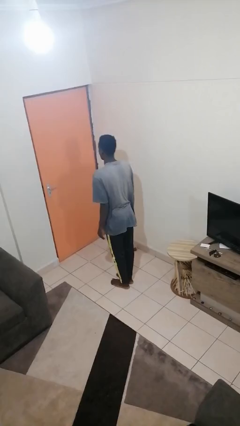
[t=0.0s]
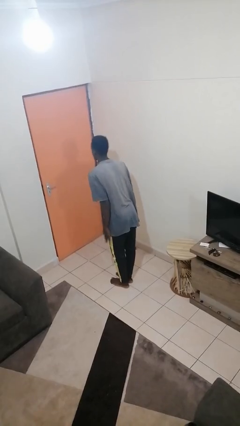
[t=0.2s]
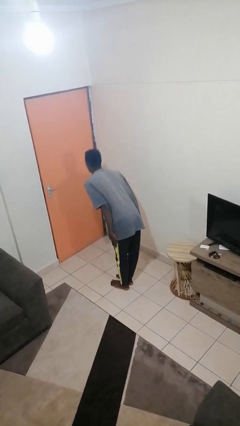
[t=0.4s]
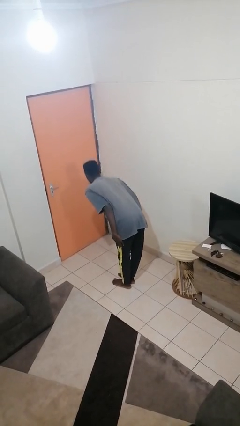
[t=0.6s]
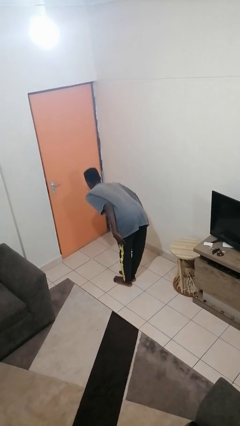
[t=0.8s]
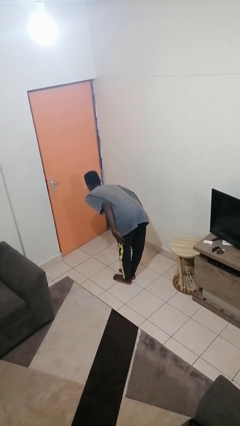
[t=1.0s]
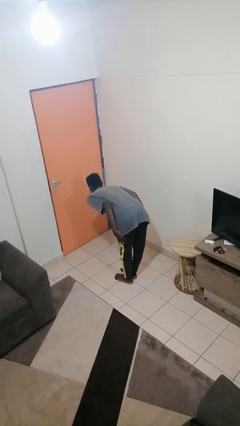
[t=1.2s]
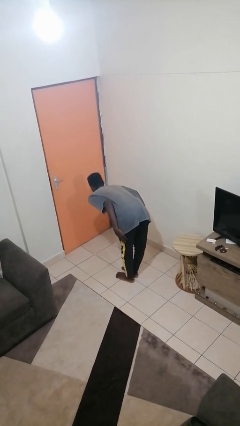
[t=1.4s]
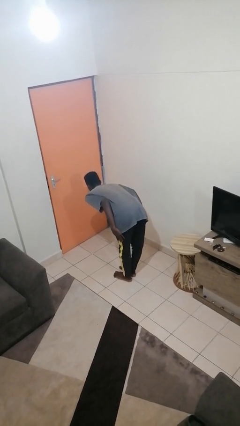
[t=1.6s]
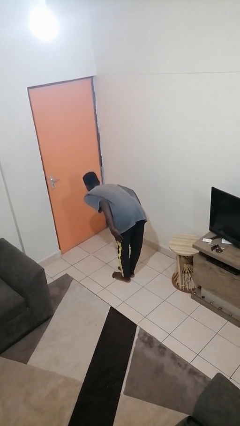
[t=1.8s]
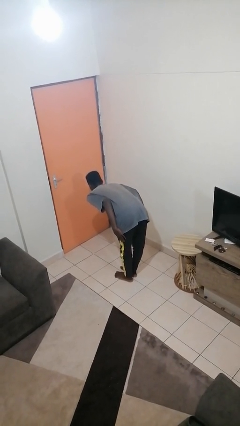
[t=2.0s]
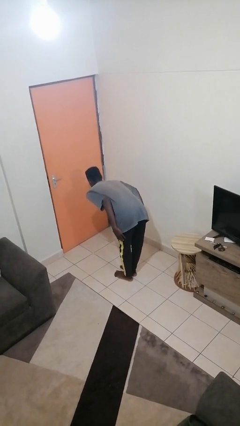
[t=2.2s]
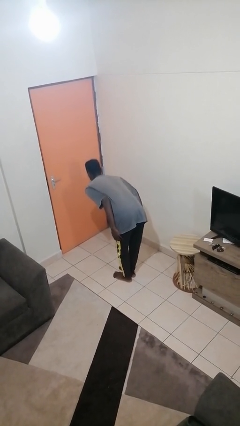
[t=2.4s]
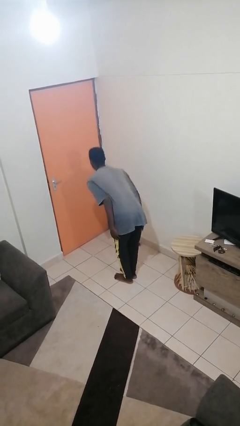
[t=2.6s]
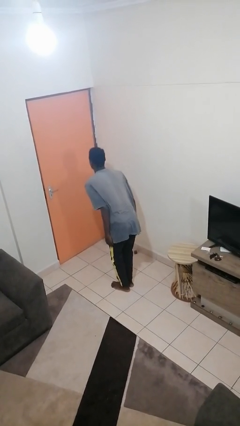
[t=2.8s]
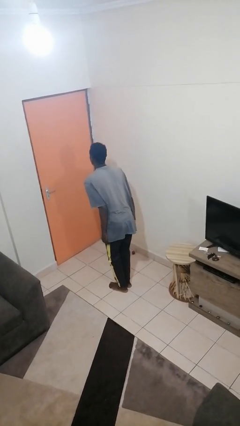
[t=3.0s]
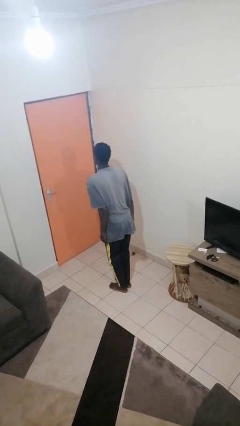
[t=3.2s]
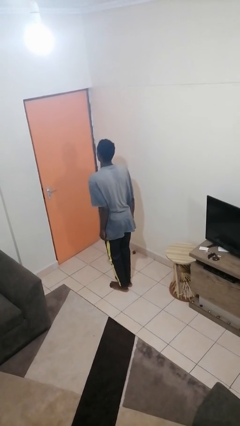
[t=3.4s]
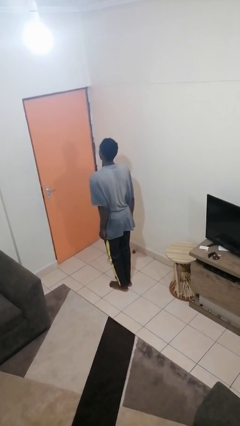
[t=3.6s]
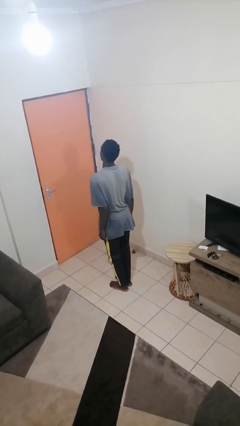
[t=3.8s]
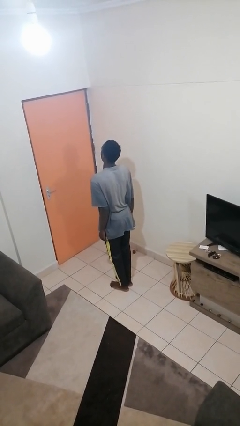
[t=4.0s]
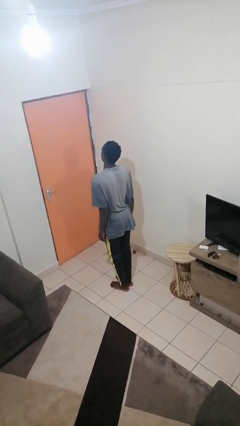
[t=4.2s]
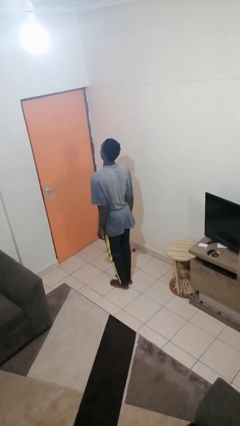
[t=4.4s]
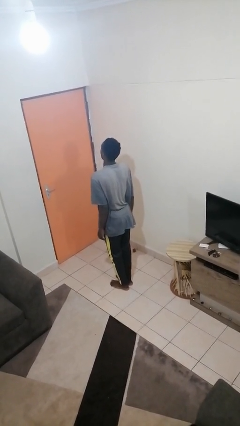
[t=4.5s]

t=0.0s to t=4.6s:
person bows

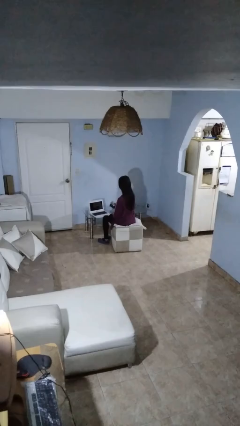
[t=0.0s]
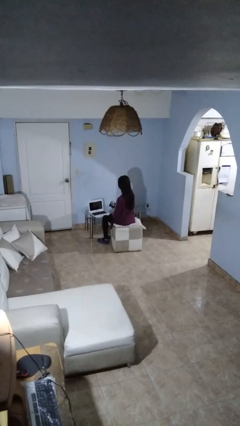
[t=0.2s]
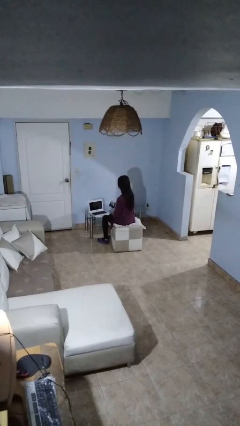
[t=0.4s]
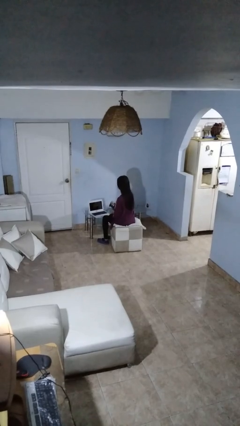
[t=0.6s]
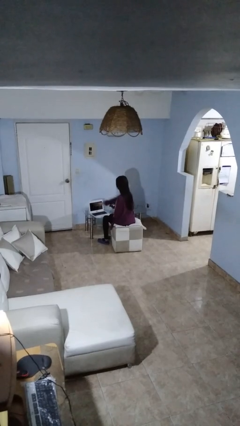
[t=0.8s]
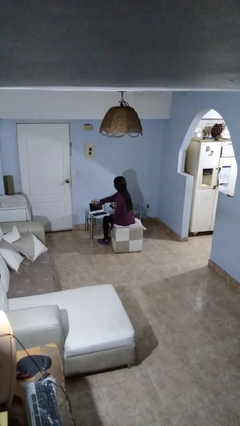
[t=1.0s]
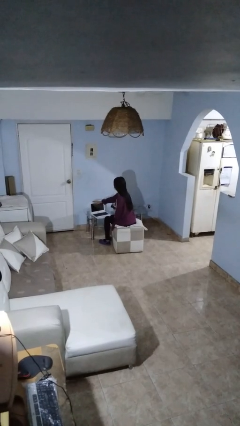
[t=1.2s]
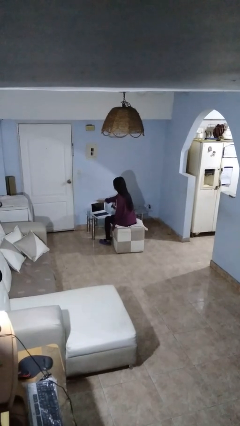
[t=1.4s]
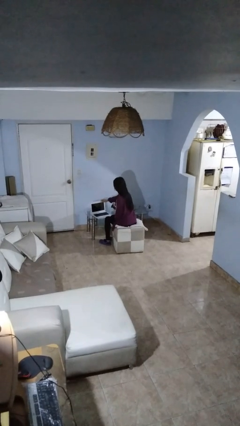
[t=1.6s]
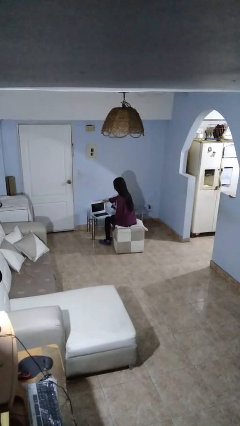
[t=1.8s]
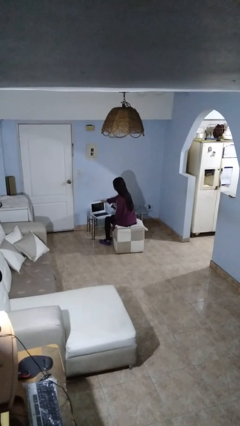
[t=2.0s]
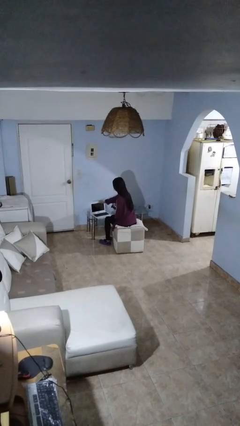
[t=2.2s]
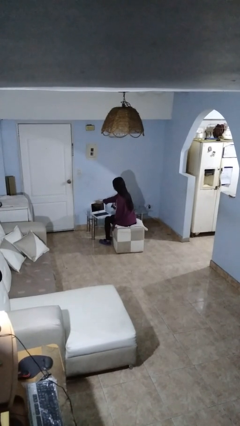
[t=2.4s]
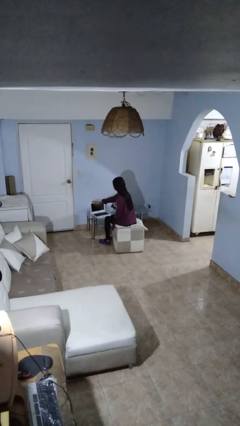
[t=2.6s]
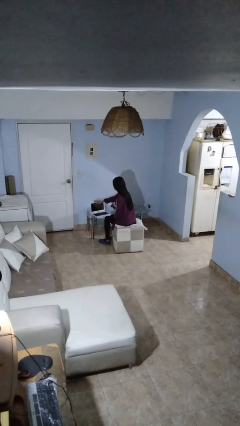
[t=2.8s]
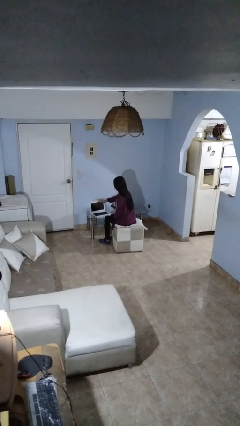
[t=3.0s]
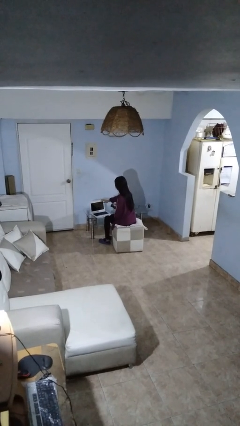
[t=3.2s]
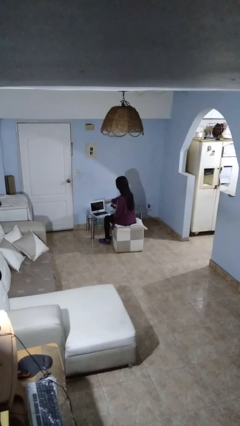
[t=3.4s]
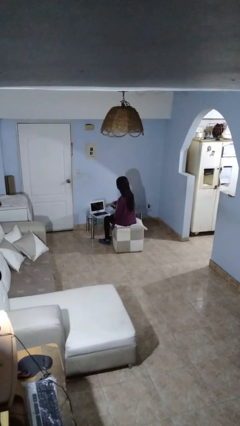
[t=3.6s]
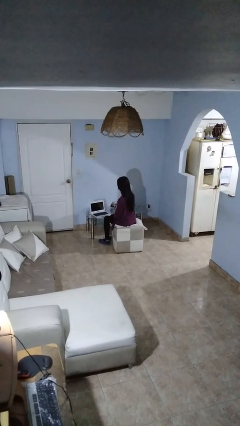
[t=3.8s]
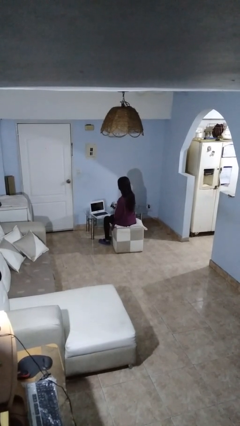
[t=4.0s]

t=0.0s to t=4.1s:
person waves hand over object

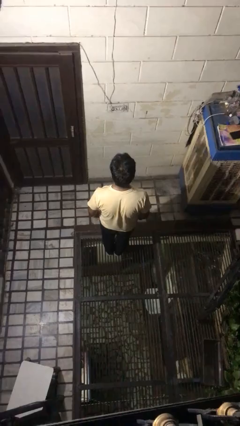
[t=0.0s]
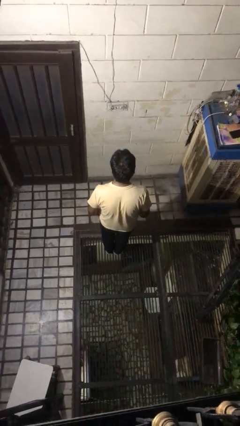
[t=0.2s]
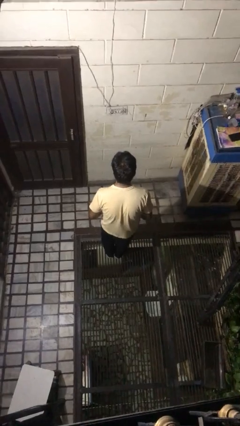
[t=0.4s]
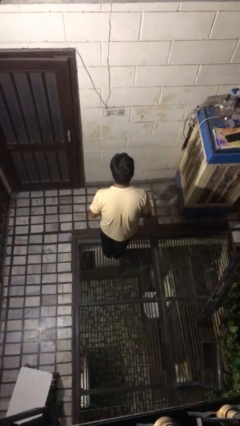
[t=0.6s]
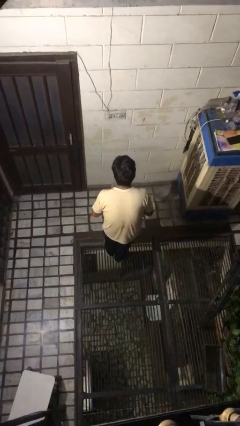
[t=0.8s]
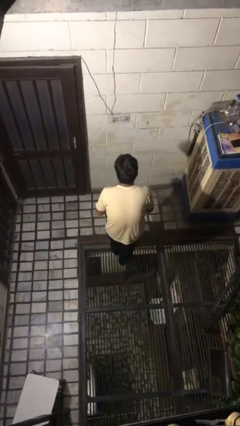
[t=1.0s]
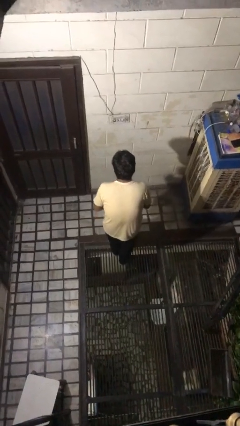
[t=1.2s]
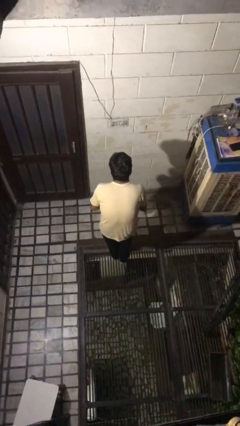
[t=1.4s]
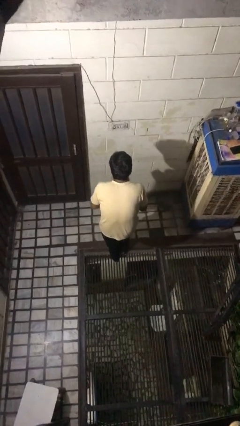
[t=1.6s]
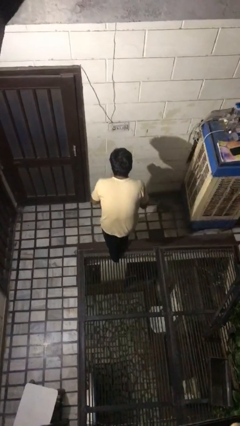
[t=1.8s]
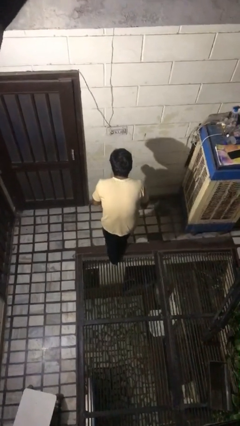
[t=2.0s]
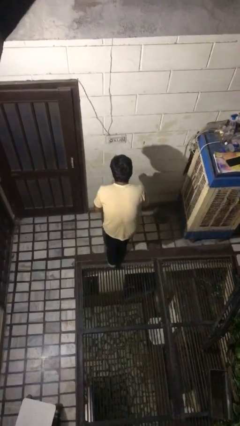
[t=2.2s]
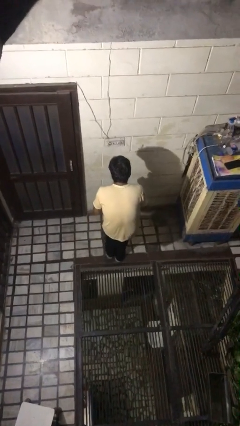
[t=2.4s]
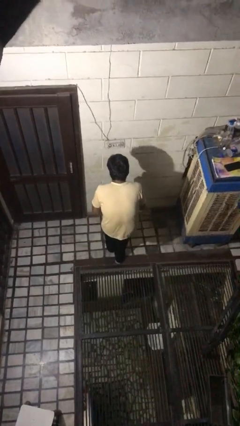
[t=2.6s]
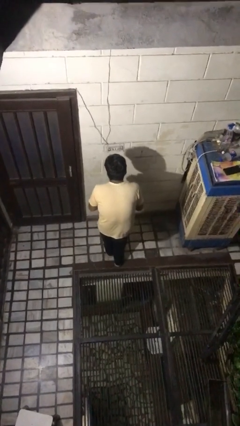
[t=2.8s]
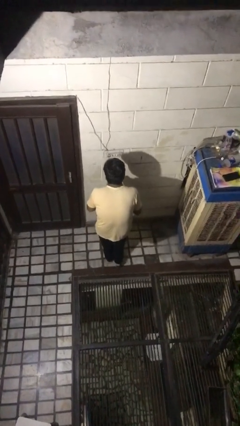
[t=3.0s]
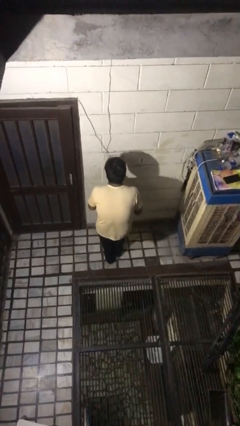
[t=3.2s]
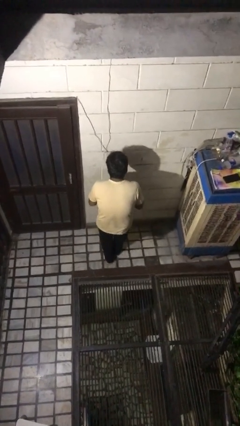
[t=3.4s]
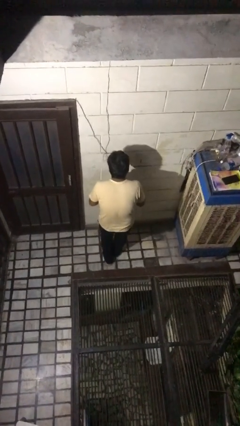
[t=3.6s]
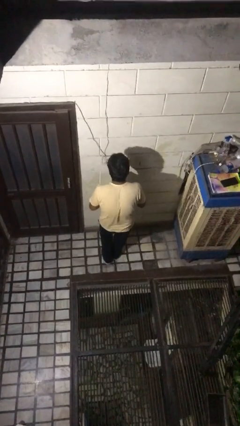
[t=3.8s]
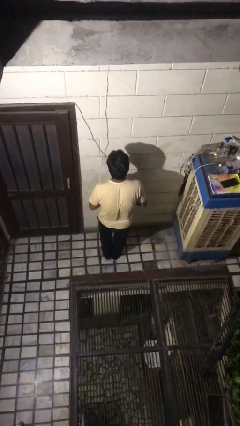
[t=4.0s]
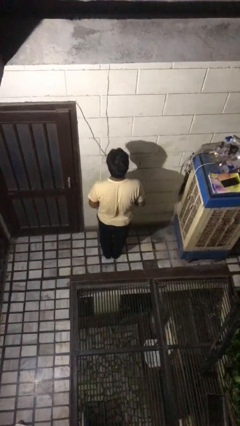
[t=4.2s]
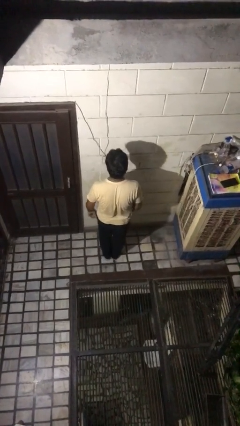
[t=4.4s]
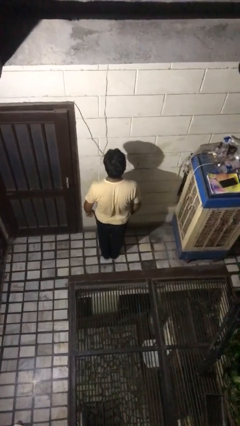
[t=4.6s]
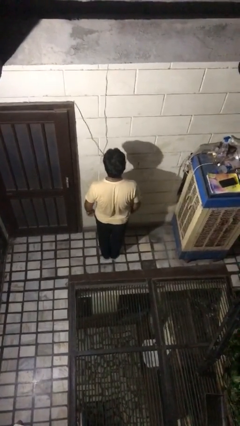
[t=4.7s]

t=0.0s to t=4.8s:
person walks tiptoe

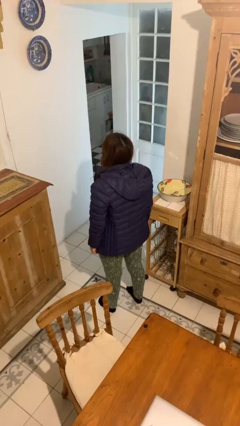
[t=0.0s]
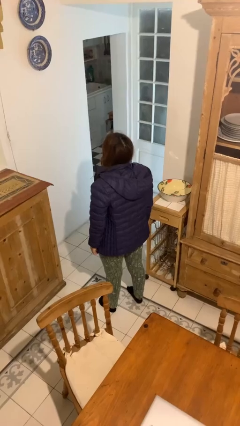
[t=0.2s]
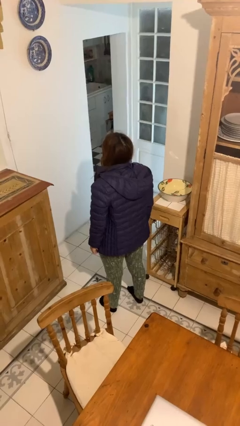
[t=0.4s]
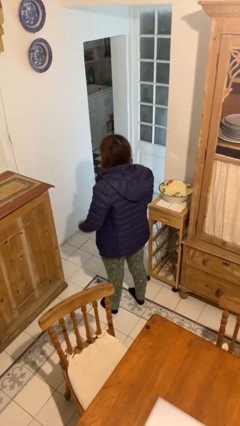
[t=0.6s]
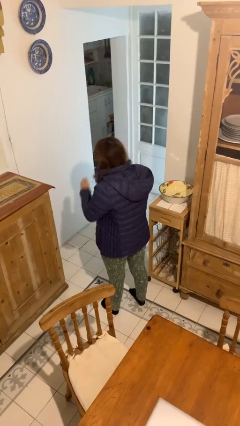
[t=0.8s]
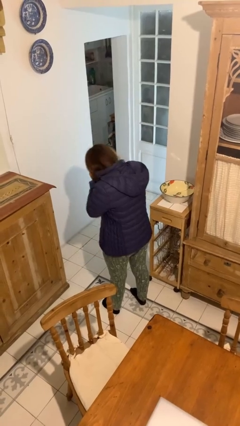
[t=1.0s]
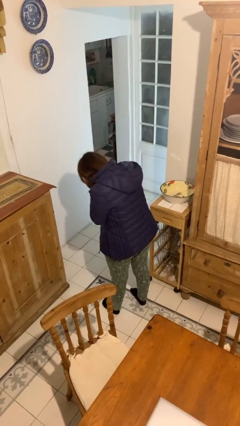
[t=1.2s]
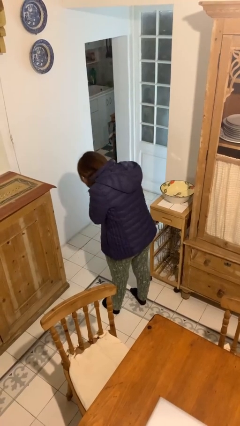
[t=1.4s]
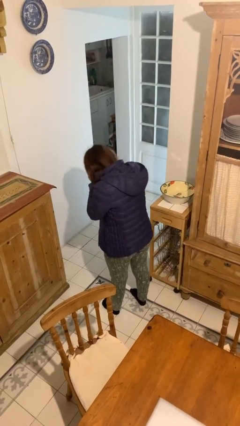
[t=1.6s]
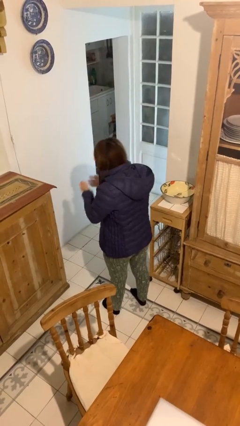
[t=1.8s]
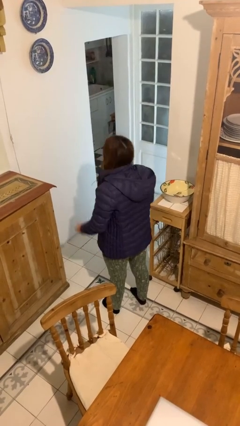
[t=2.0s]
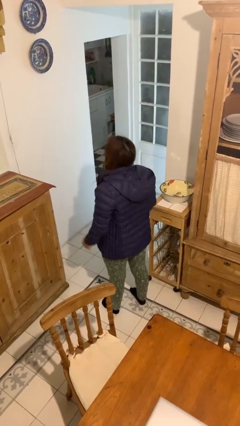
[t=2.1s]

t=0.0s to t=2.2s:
person sneezes into hand

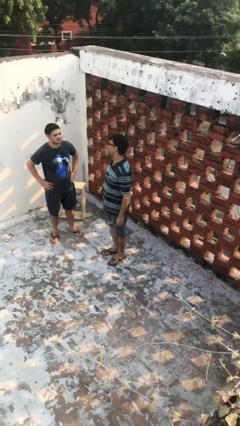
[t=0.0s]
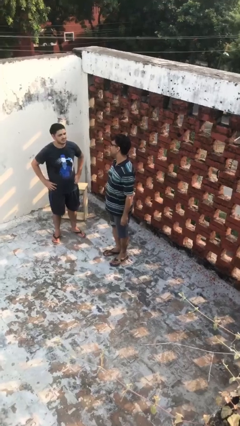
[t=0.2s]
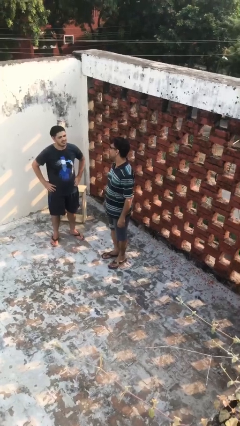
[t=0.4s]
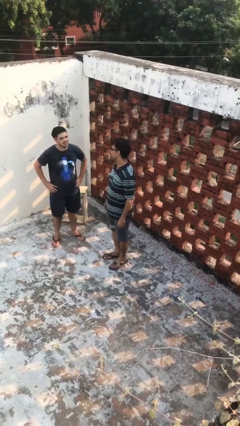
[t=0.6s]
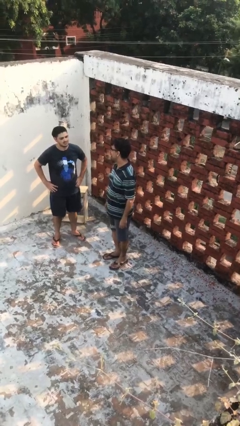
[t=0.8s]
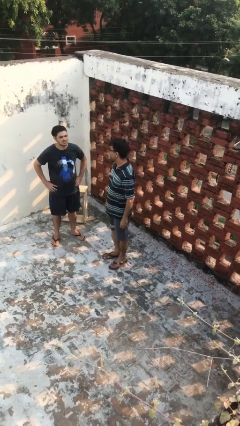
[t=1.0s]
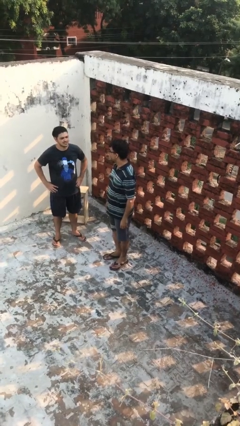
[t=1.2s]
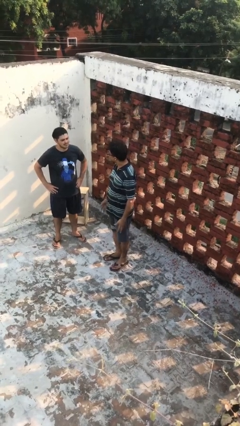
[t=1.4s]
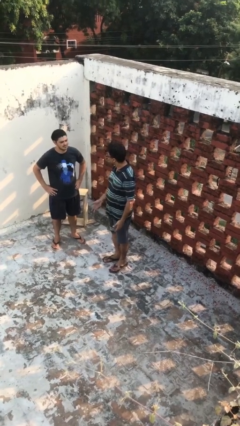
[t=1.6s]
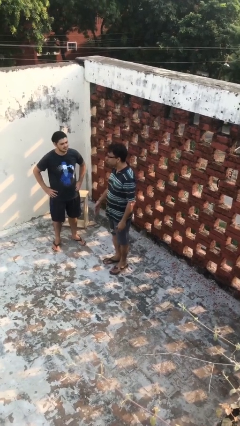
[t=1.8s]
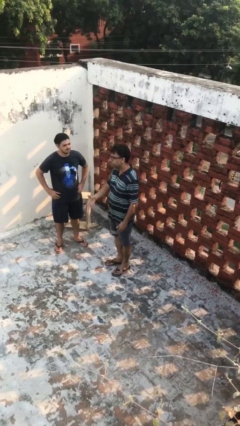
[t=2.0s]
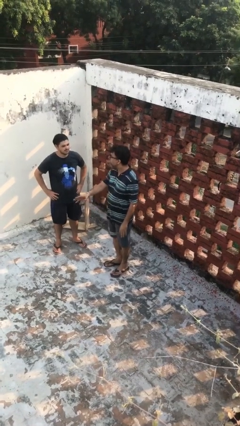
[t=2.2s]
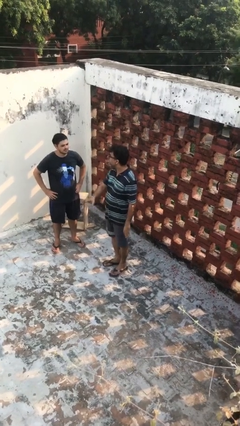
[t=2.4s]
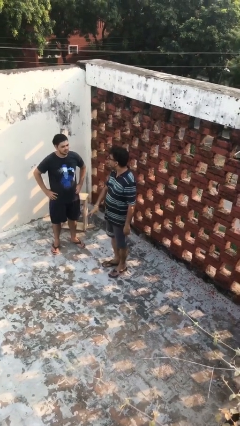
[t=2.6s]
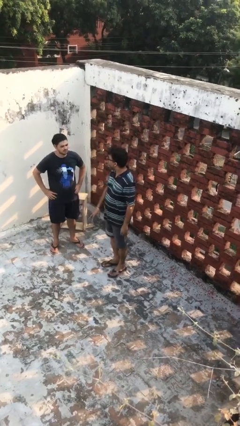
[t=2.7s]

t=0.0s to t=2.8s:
person talks to person
